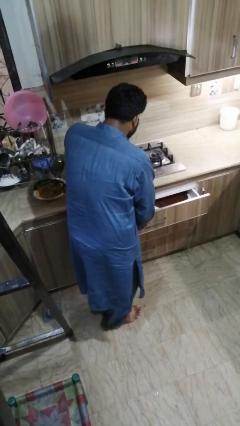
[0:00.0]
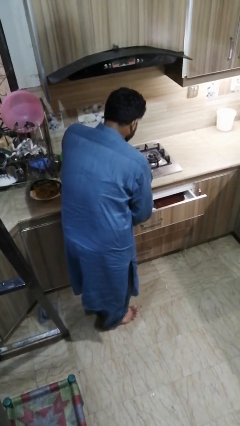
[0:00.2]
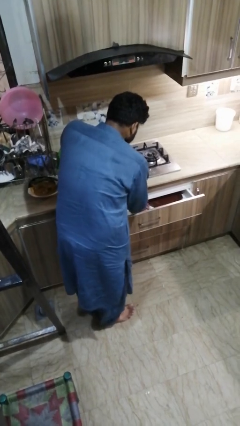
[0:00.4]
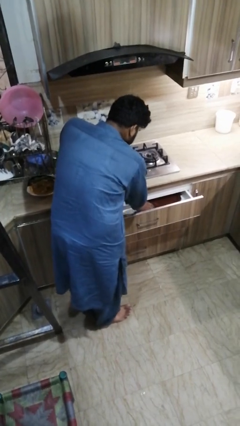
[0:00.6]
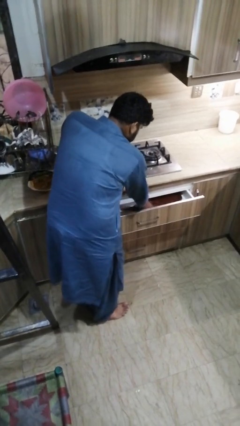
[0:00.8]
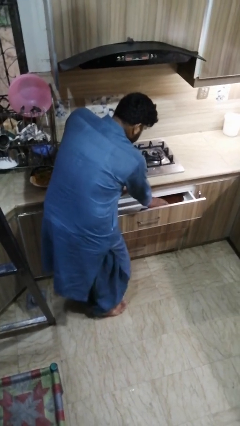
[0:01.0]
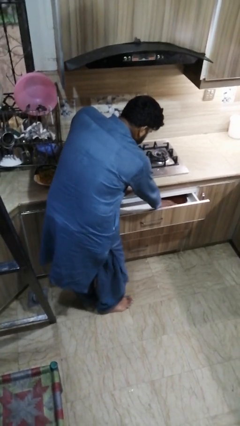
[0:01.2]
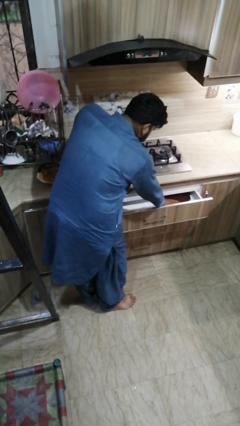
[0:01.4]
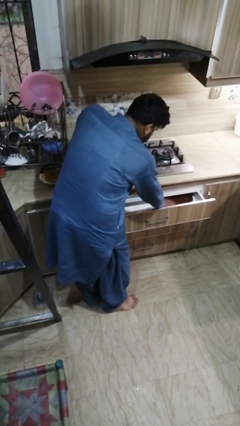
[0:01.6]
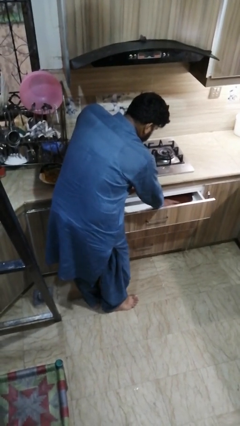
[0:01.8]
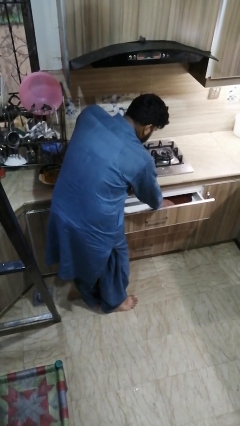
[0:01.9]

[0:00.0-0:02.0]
person searches in kitchen drawer

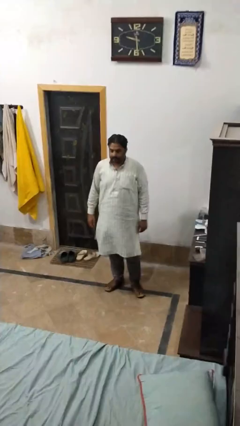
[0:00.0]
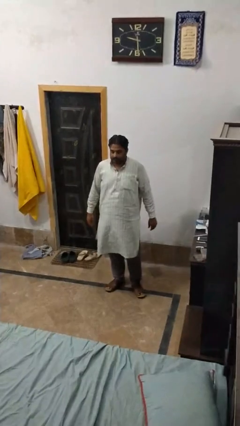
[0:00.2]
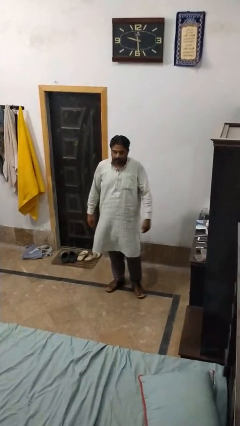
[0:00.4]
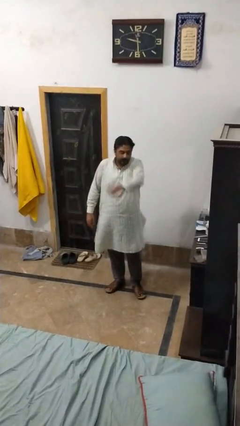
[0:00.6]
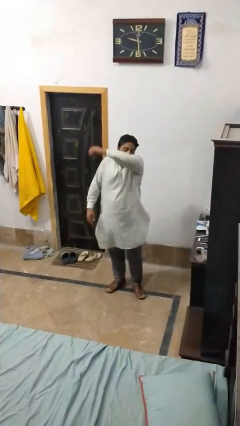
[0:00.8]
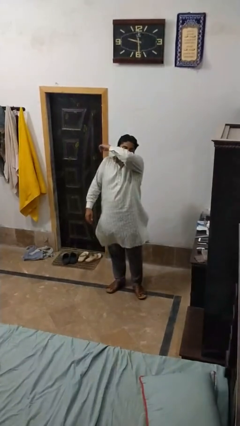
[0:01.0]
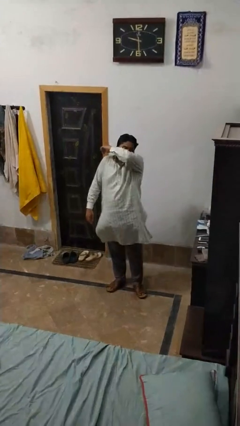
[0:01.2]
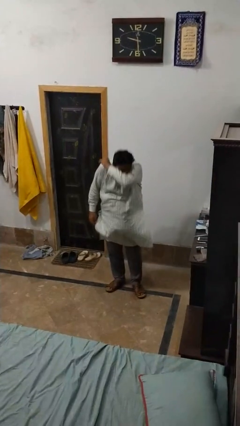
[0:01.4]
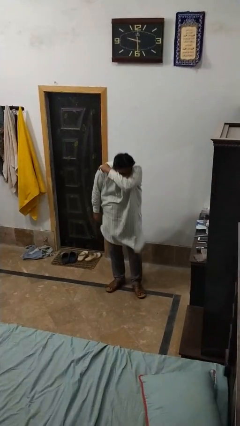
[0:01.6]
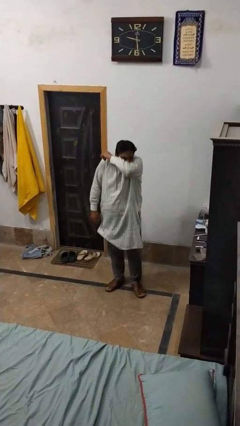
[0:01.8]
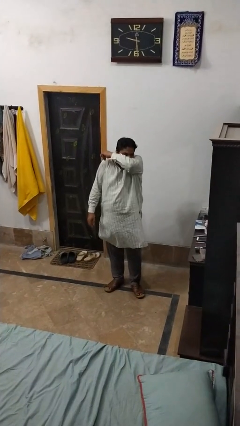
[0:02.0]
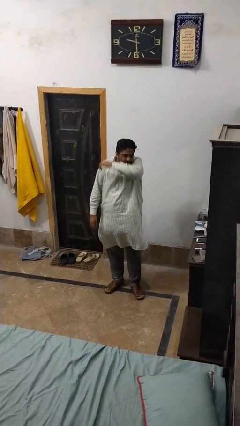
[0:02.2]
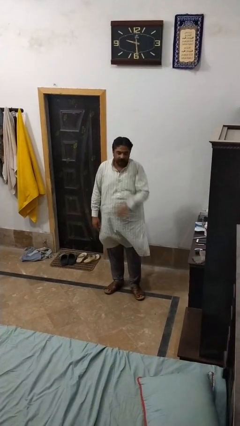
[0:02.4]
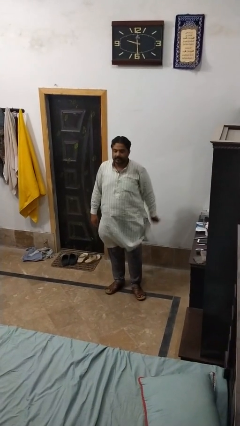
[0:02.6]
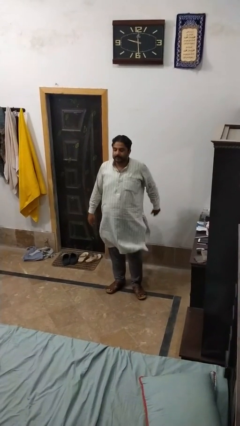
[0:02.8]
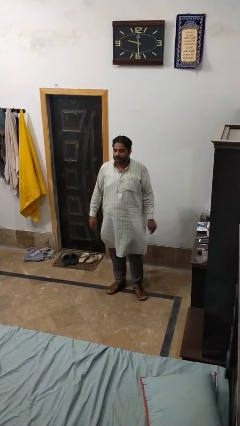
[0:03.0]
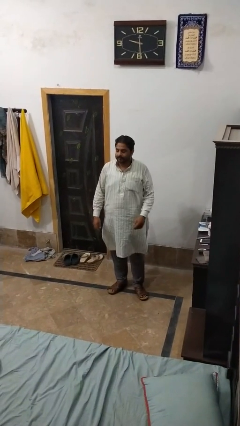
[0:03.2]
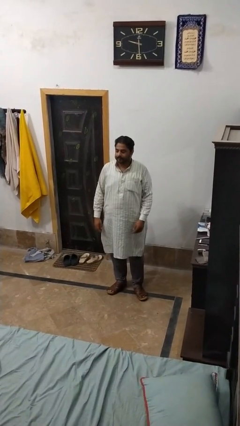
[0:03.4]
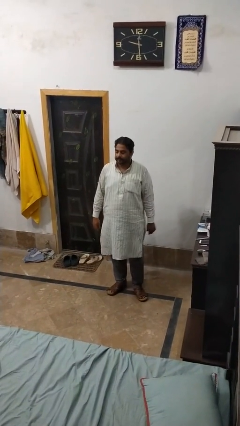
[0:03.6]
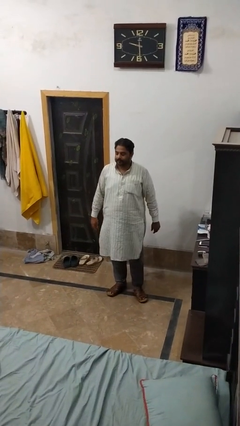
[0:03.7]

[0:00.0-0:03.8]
person sneezes into arm

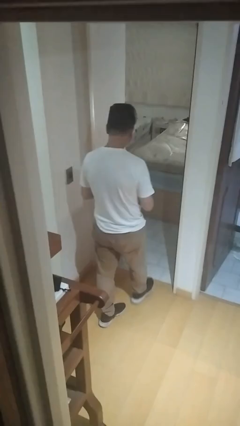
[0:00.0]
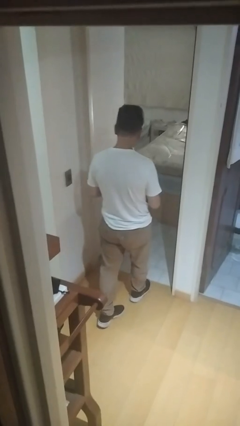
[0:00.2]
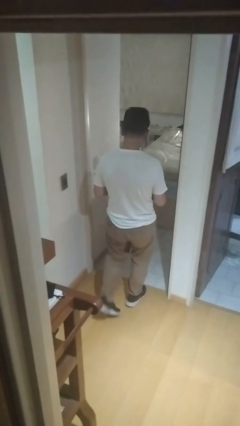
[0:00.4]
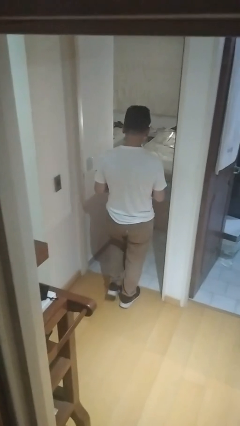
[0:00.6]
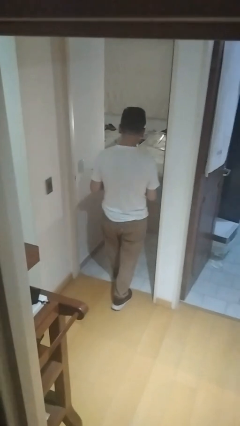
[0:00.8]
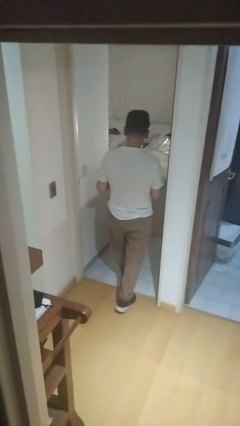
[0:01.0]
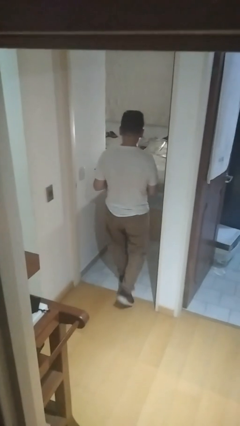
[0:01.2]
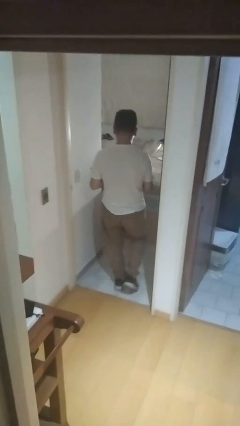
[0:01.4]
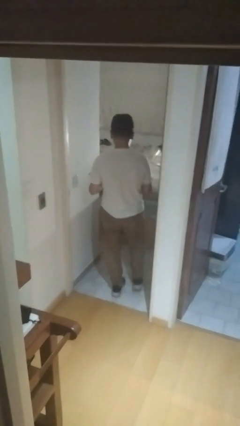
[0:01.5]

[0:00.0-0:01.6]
person exits scene through structure

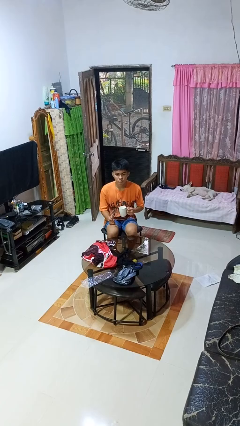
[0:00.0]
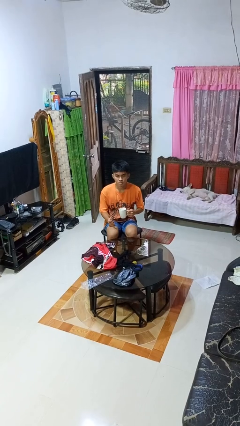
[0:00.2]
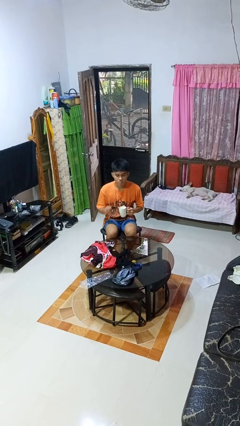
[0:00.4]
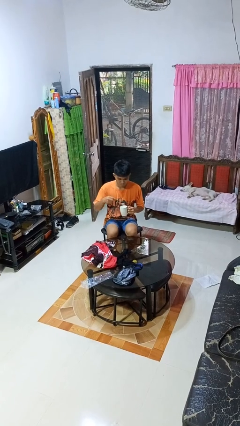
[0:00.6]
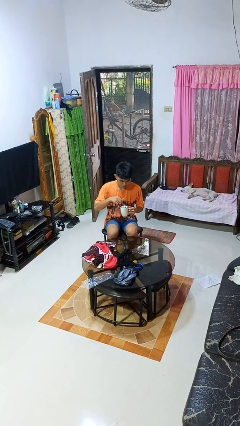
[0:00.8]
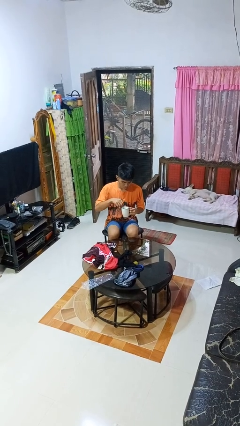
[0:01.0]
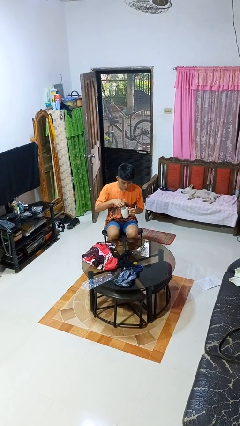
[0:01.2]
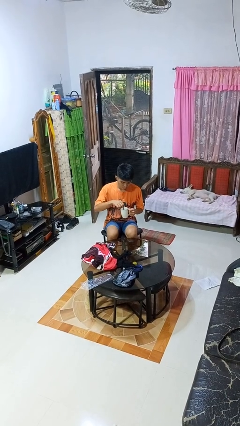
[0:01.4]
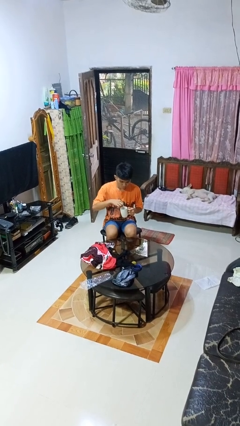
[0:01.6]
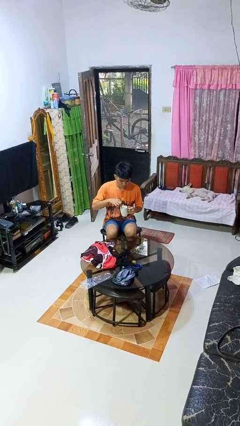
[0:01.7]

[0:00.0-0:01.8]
person stirs mug

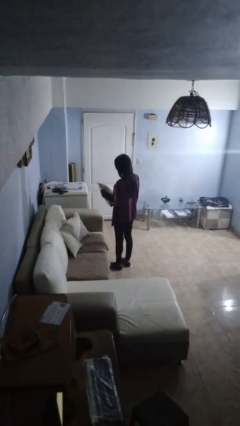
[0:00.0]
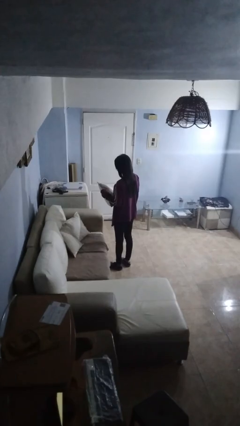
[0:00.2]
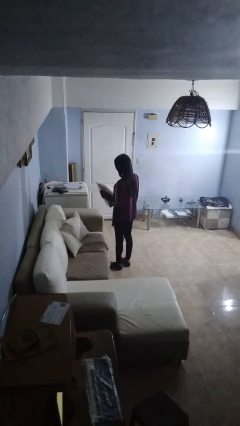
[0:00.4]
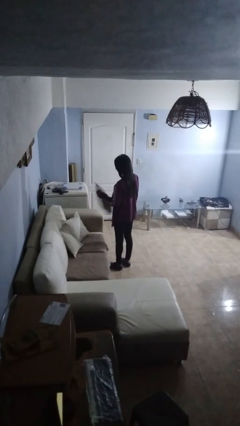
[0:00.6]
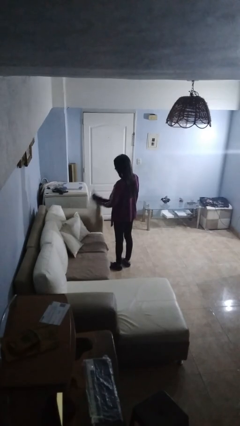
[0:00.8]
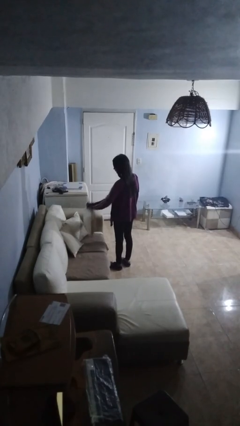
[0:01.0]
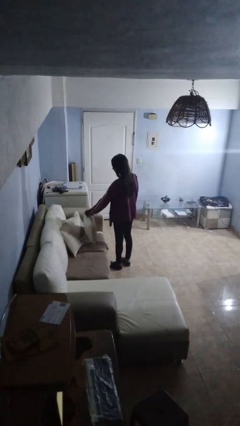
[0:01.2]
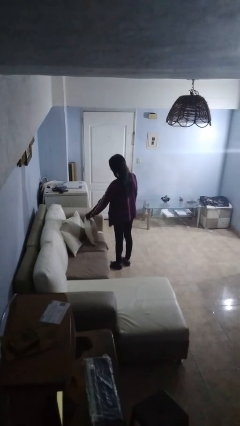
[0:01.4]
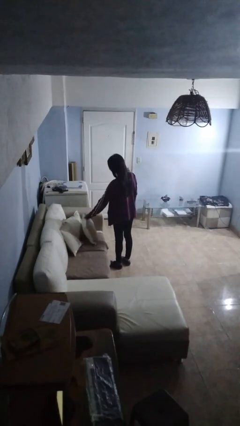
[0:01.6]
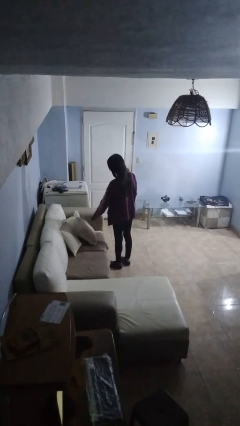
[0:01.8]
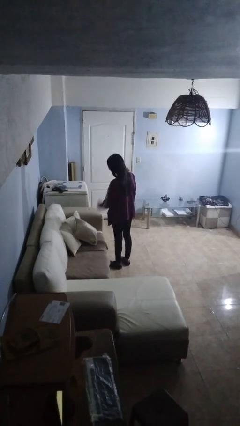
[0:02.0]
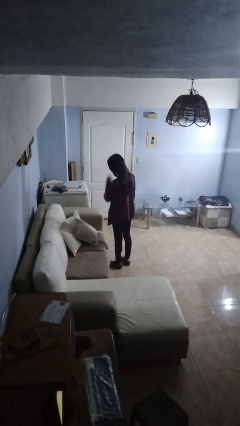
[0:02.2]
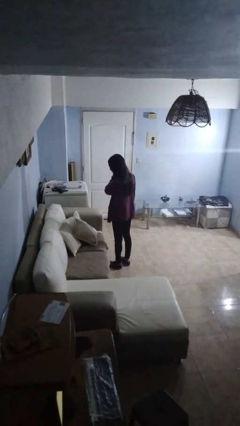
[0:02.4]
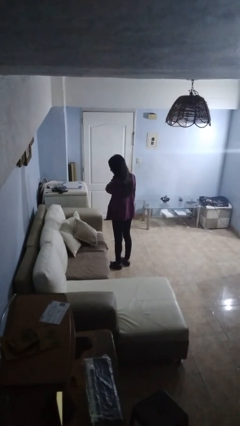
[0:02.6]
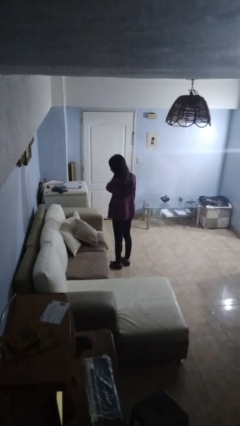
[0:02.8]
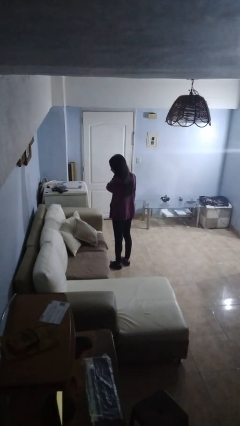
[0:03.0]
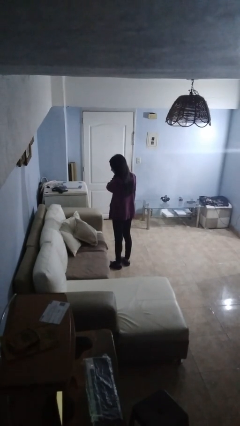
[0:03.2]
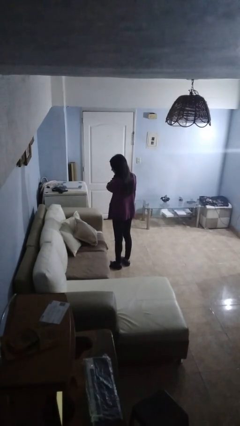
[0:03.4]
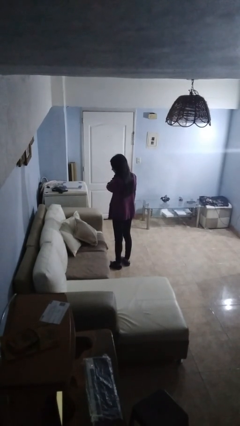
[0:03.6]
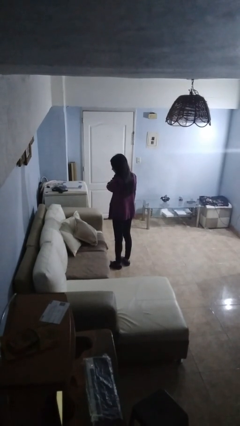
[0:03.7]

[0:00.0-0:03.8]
person picks up object from couch

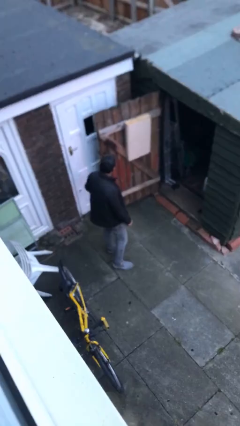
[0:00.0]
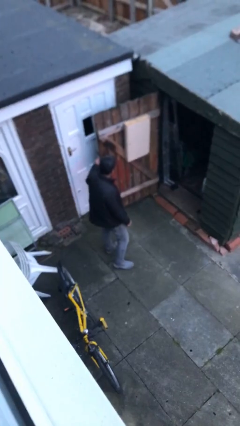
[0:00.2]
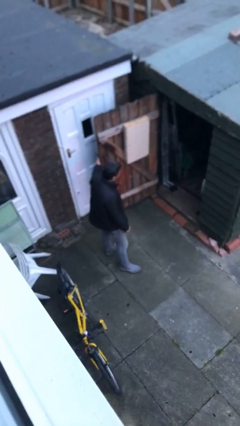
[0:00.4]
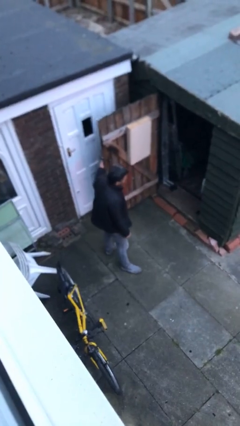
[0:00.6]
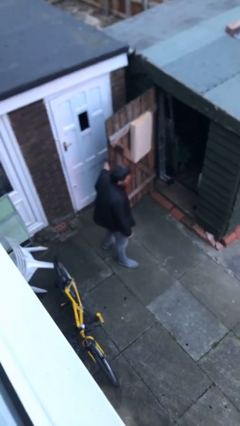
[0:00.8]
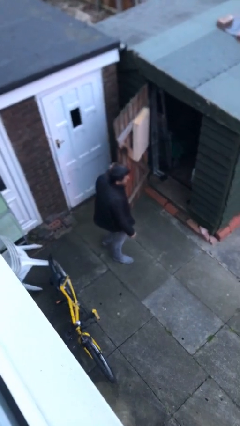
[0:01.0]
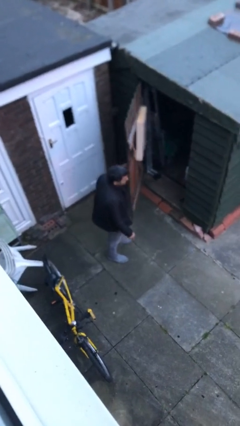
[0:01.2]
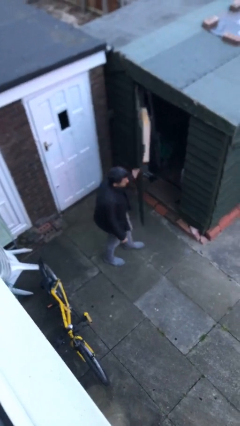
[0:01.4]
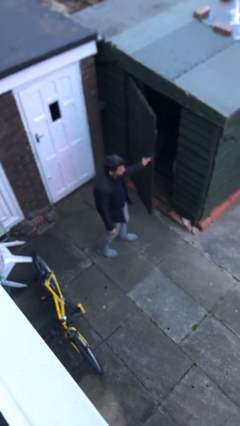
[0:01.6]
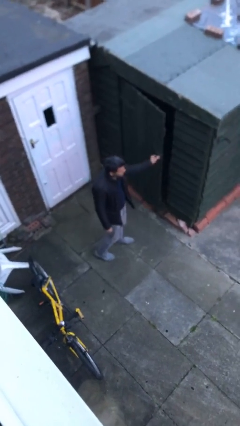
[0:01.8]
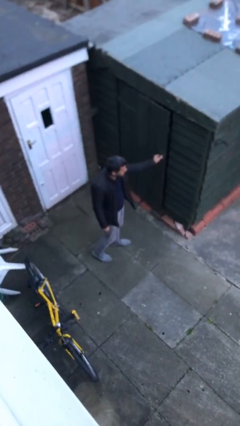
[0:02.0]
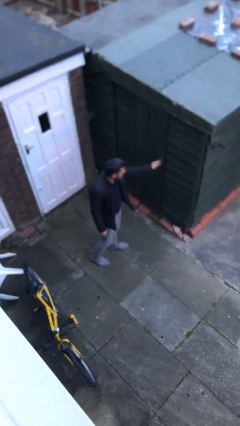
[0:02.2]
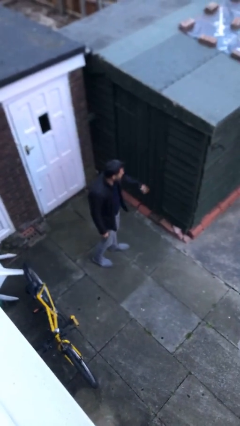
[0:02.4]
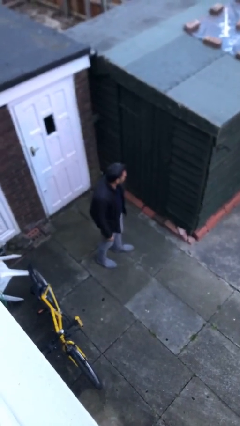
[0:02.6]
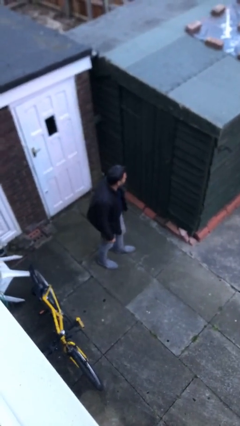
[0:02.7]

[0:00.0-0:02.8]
person closes facility door

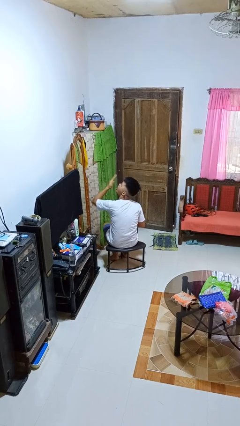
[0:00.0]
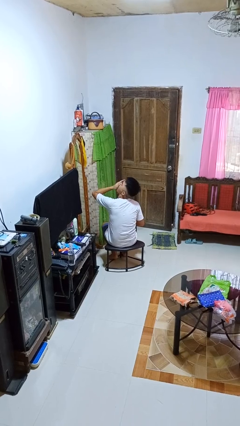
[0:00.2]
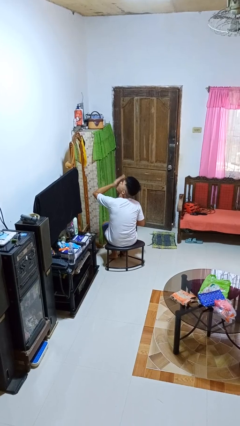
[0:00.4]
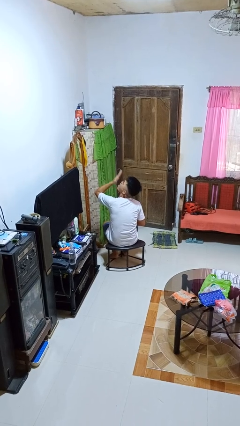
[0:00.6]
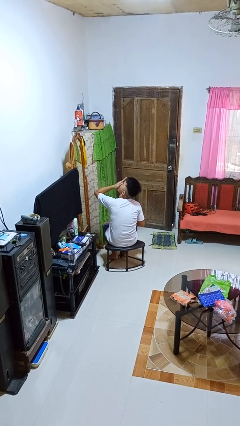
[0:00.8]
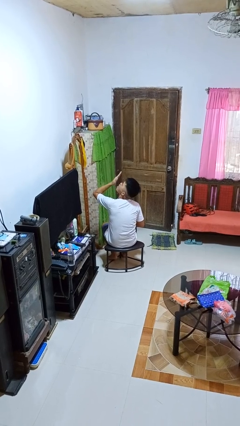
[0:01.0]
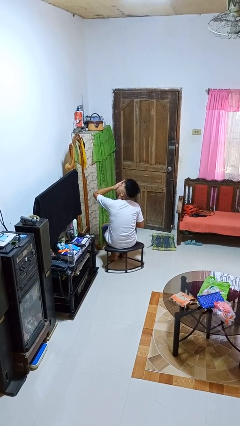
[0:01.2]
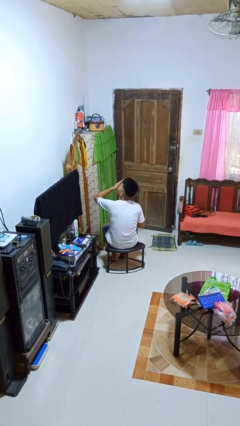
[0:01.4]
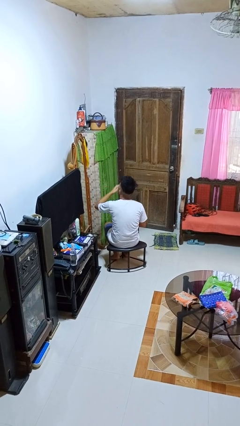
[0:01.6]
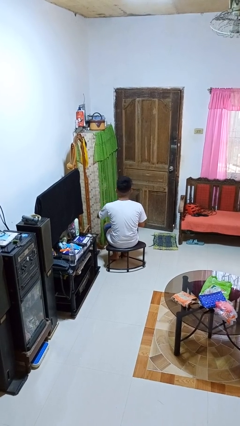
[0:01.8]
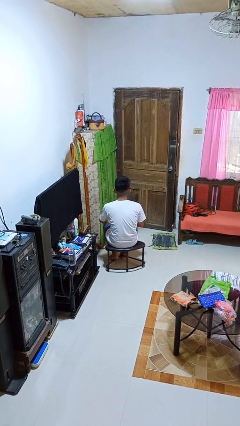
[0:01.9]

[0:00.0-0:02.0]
person yawns
